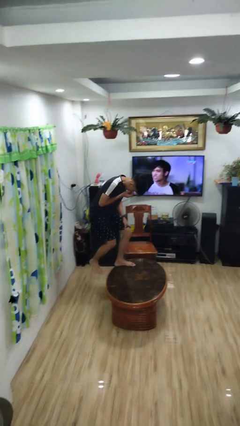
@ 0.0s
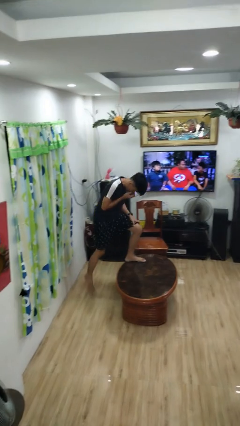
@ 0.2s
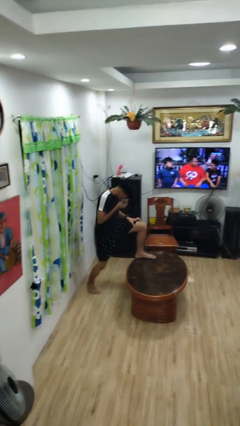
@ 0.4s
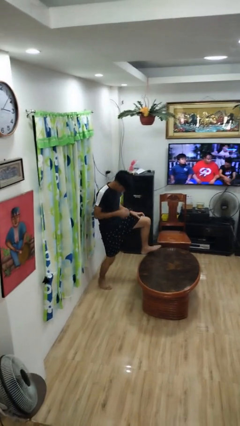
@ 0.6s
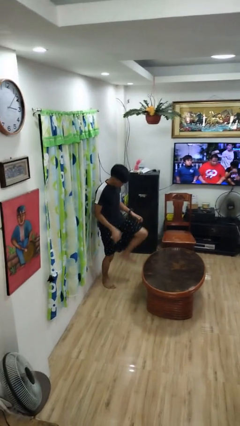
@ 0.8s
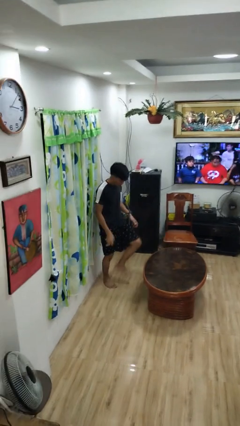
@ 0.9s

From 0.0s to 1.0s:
person climbs off table

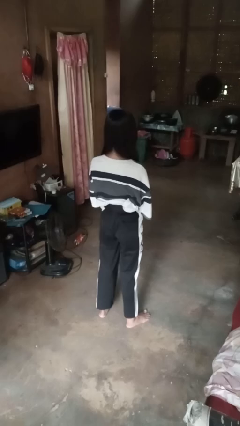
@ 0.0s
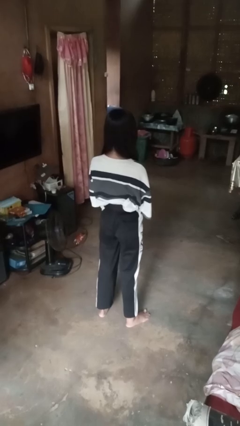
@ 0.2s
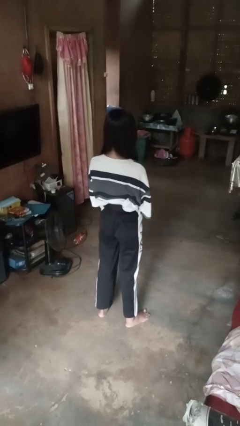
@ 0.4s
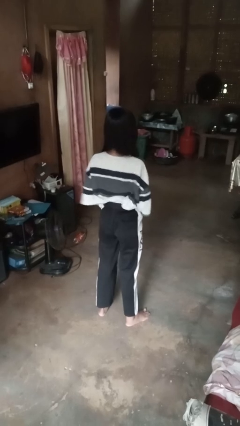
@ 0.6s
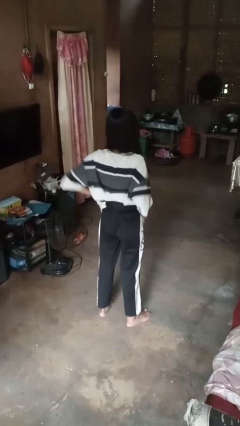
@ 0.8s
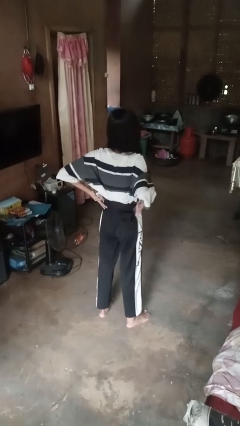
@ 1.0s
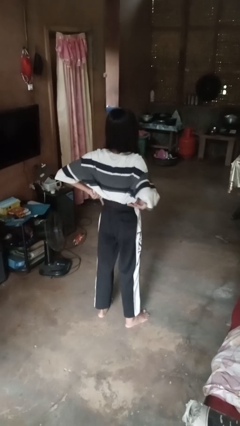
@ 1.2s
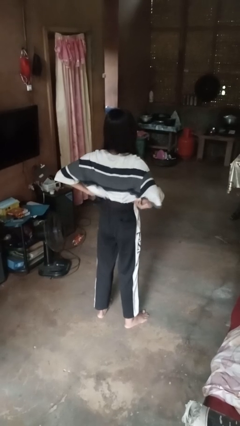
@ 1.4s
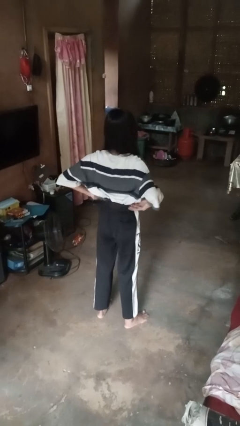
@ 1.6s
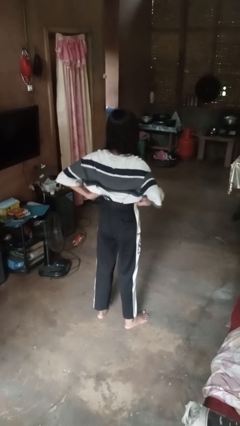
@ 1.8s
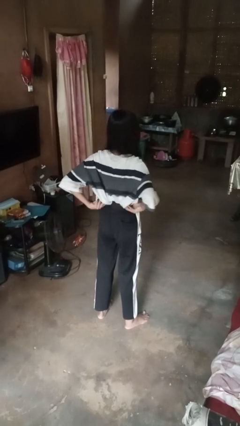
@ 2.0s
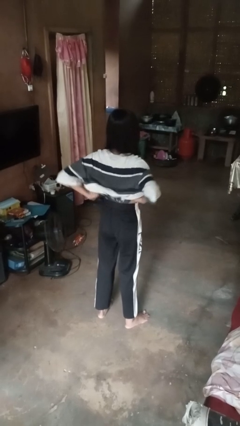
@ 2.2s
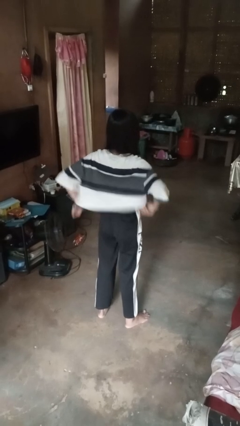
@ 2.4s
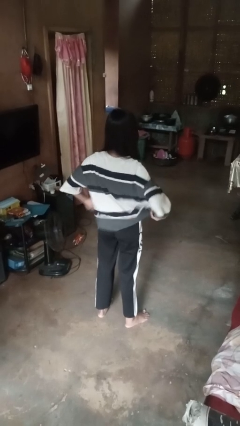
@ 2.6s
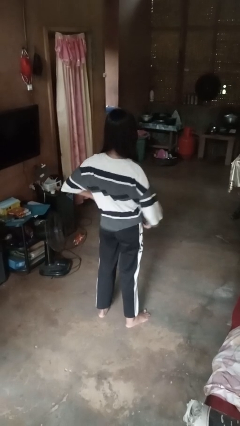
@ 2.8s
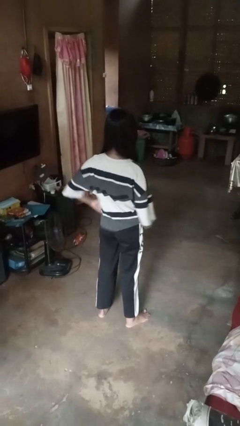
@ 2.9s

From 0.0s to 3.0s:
person untucks shirt

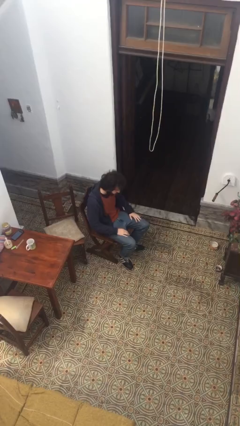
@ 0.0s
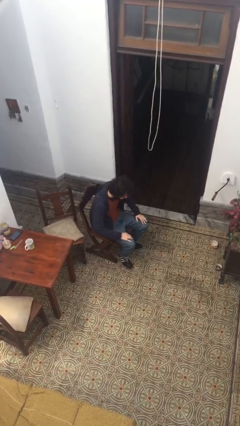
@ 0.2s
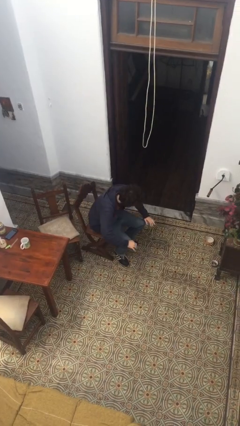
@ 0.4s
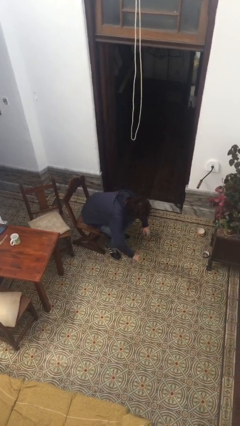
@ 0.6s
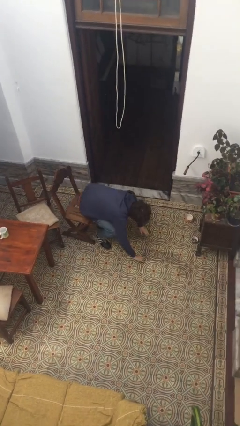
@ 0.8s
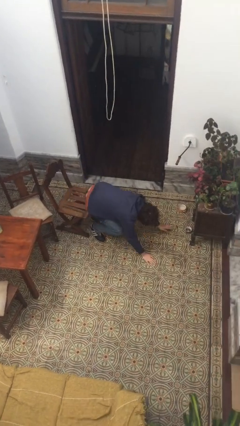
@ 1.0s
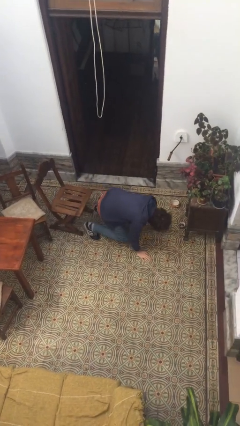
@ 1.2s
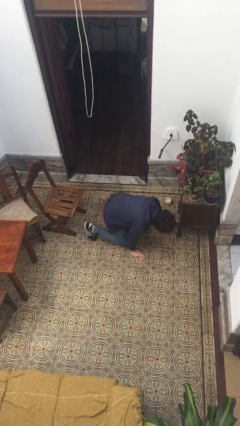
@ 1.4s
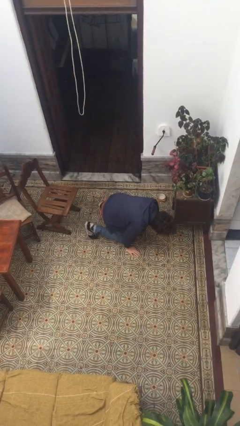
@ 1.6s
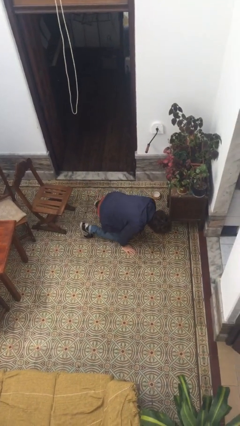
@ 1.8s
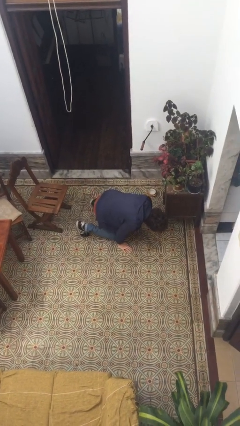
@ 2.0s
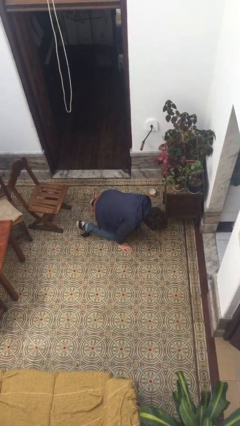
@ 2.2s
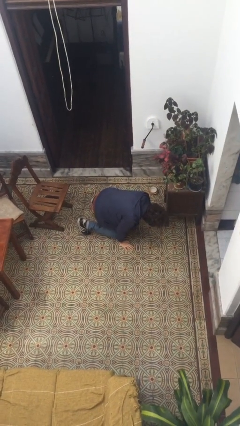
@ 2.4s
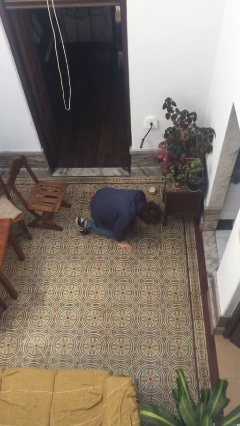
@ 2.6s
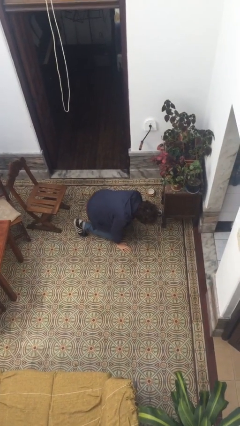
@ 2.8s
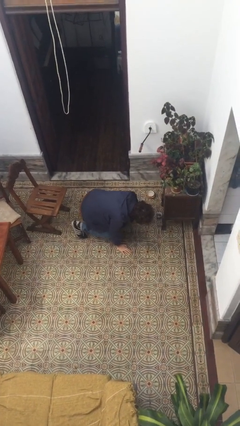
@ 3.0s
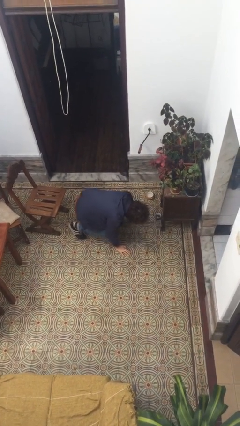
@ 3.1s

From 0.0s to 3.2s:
person falls from chair

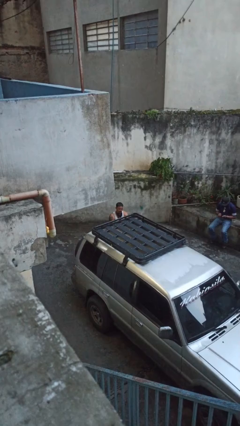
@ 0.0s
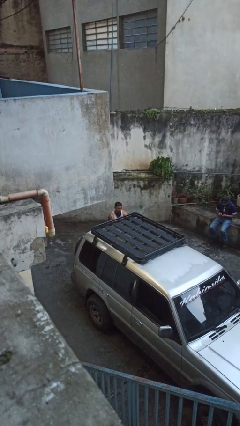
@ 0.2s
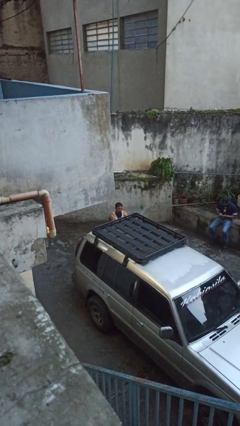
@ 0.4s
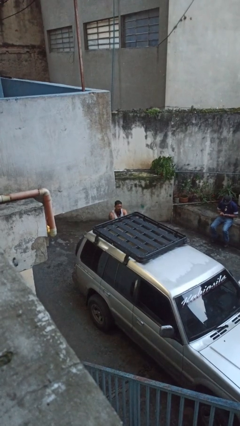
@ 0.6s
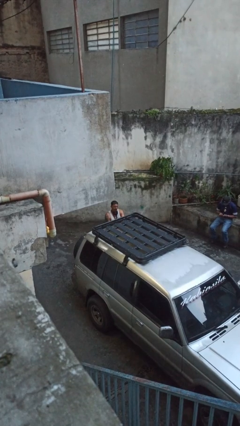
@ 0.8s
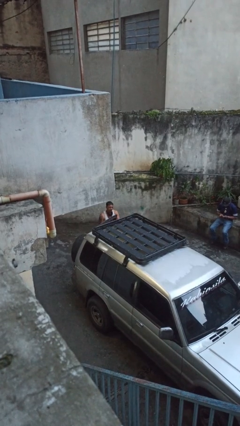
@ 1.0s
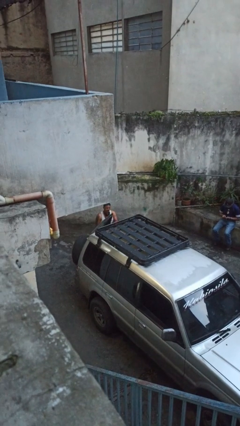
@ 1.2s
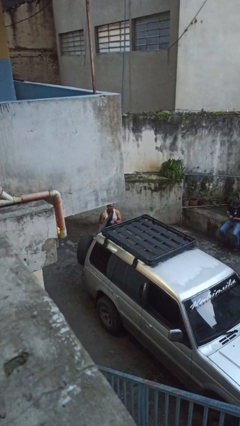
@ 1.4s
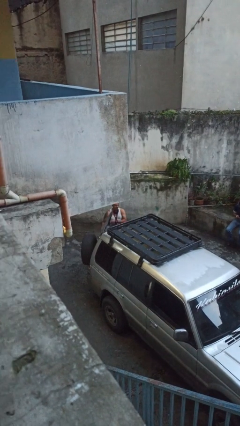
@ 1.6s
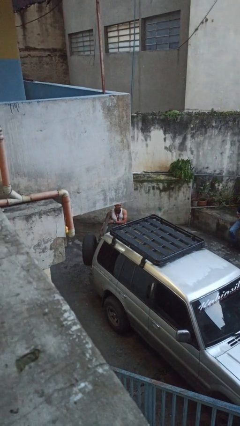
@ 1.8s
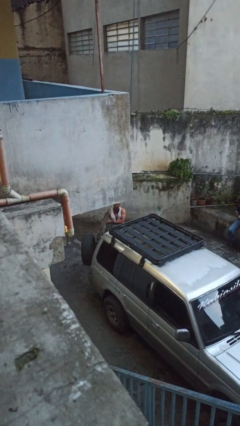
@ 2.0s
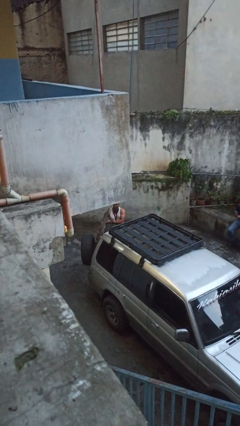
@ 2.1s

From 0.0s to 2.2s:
person opens car trunk

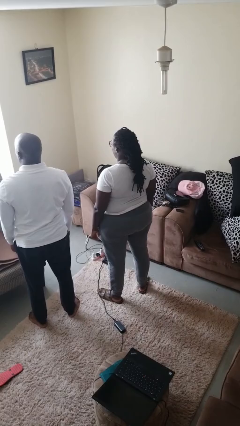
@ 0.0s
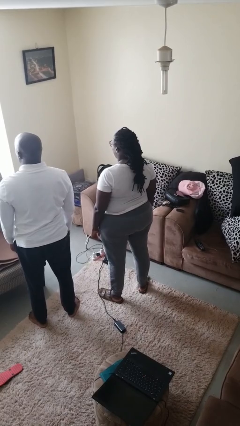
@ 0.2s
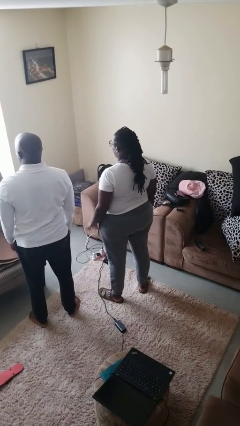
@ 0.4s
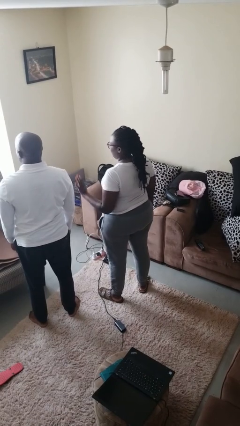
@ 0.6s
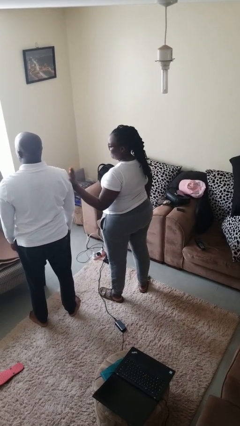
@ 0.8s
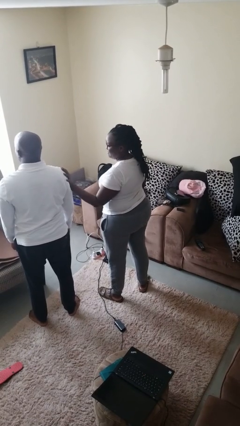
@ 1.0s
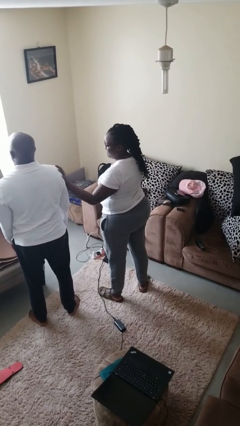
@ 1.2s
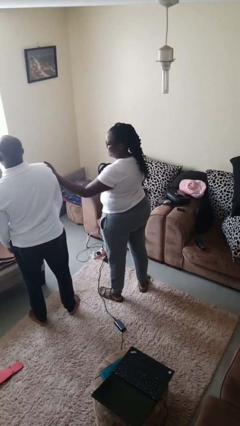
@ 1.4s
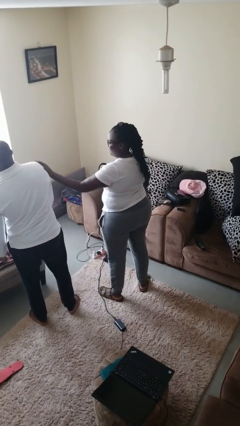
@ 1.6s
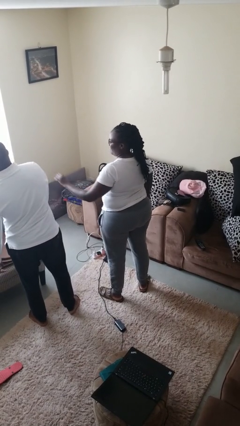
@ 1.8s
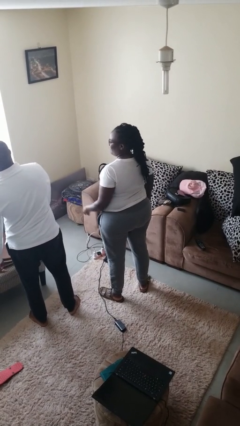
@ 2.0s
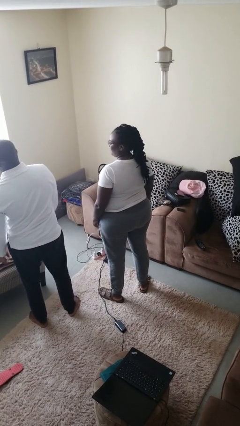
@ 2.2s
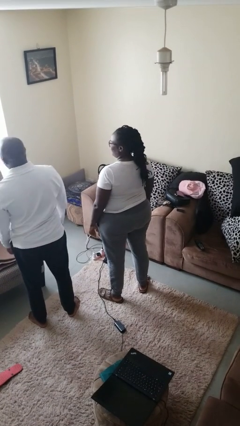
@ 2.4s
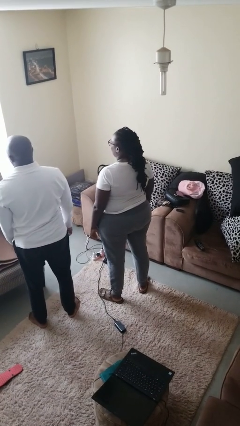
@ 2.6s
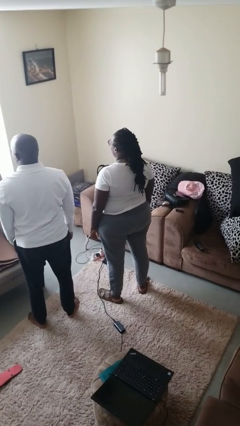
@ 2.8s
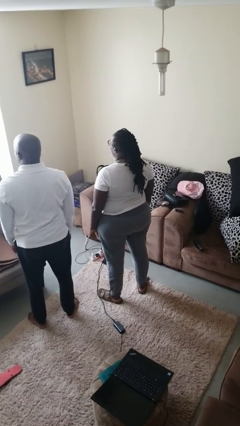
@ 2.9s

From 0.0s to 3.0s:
person shoves person

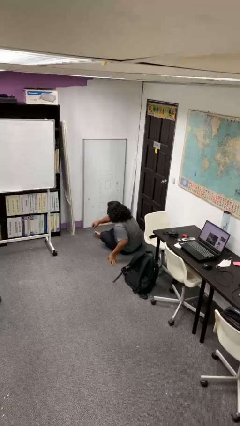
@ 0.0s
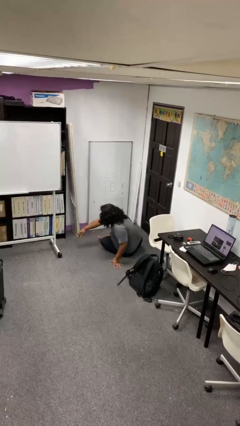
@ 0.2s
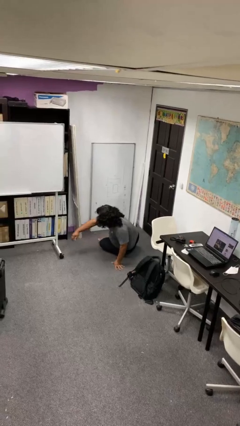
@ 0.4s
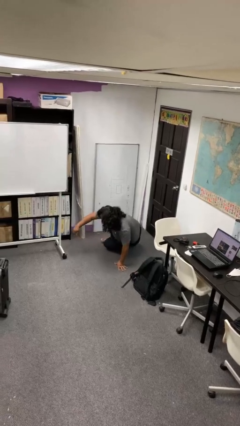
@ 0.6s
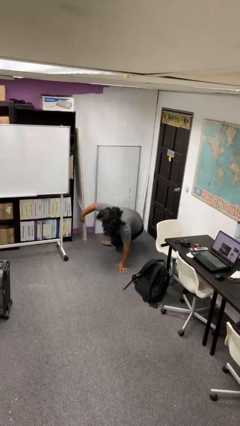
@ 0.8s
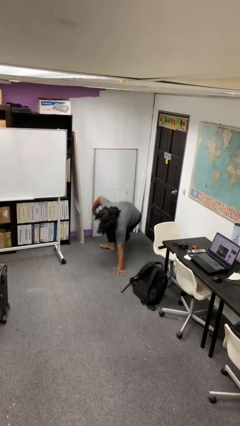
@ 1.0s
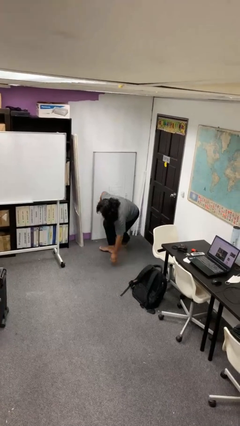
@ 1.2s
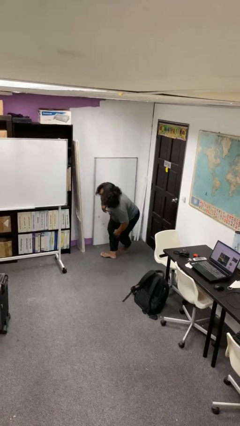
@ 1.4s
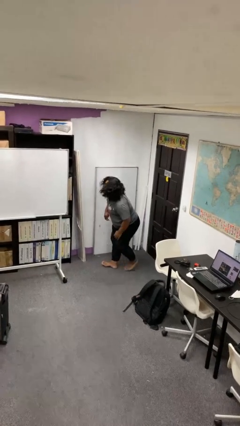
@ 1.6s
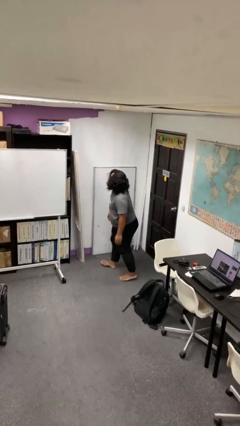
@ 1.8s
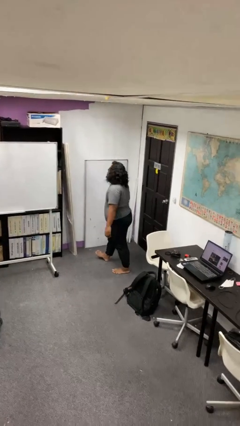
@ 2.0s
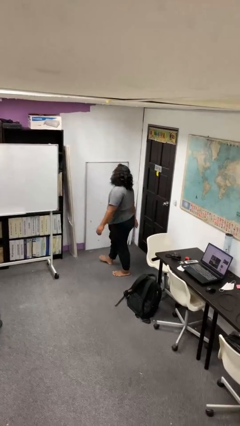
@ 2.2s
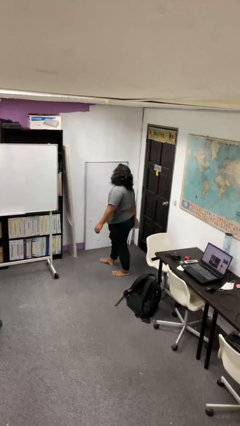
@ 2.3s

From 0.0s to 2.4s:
person stands up from floor

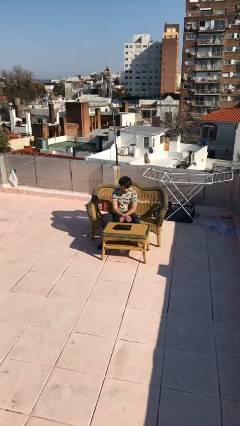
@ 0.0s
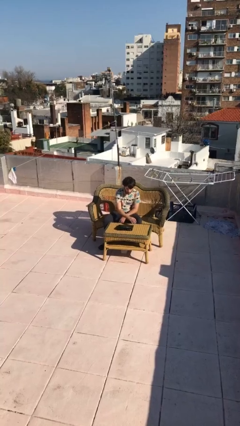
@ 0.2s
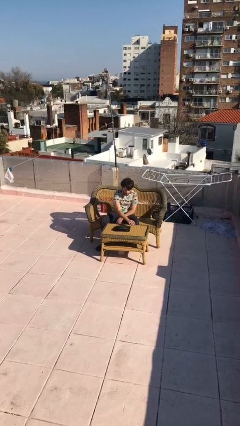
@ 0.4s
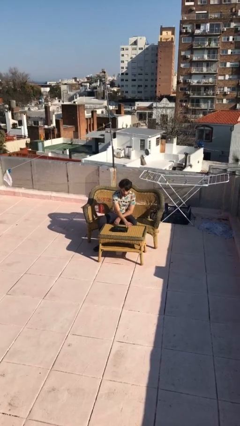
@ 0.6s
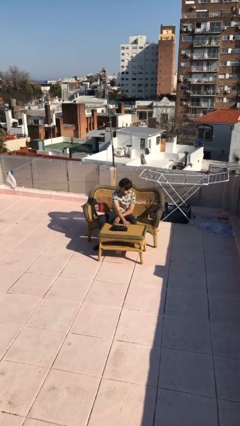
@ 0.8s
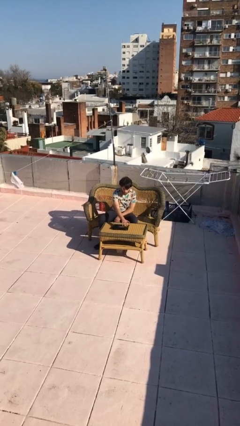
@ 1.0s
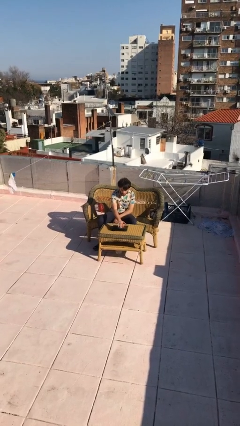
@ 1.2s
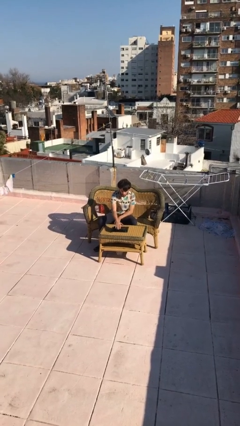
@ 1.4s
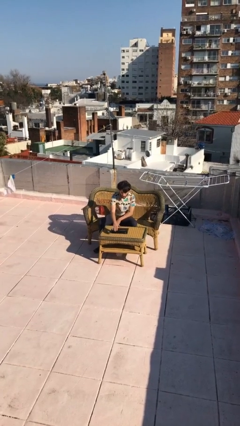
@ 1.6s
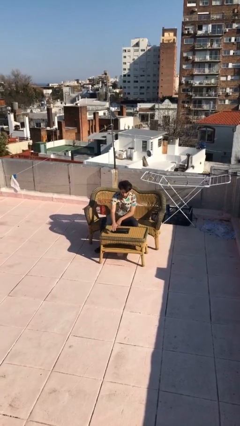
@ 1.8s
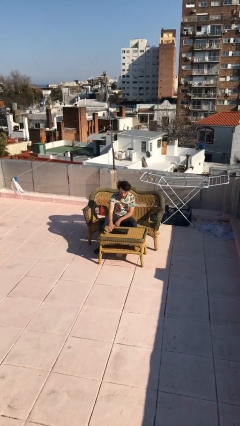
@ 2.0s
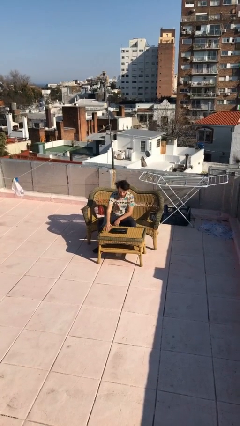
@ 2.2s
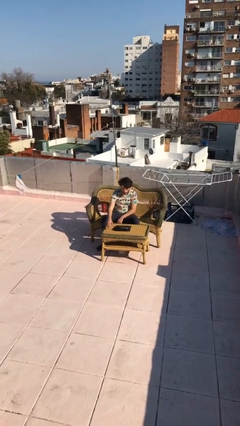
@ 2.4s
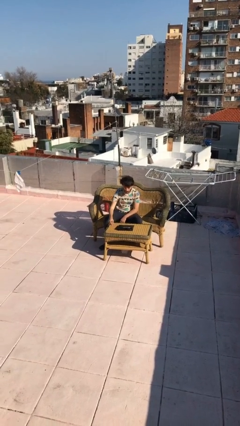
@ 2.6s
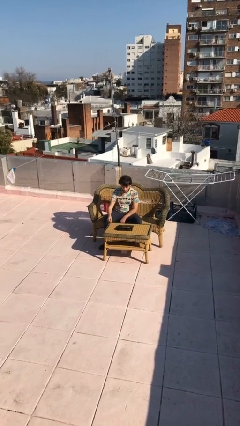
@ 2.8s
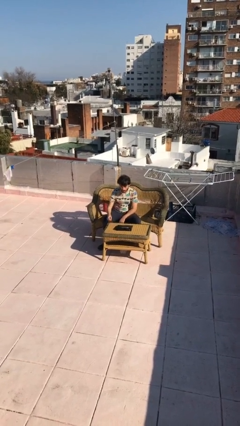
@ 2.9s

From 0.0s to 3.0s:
person waves hand over object
